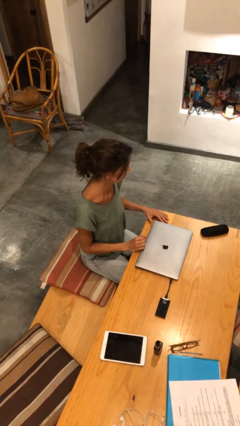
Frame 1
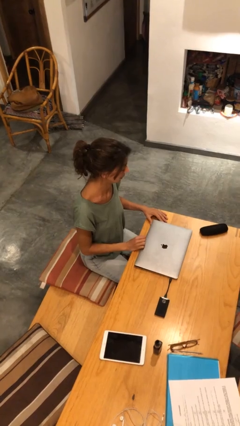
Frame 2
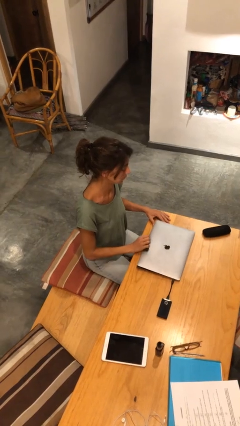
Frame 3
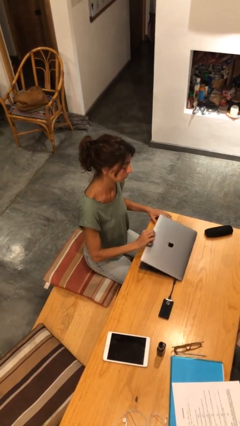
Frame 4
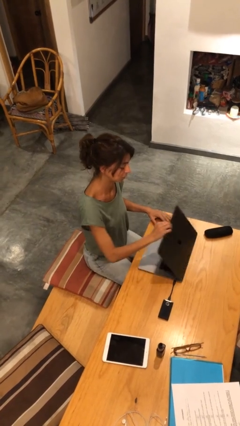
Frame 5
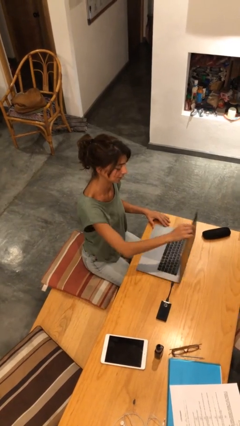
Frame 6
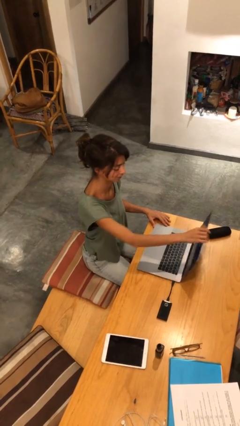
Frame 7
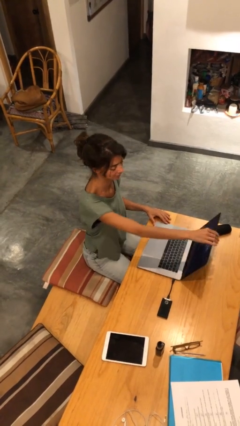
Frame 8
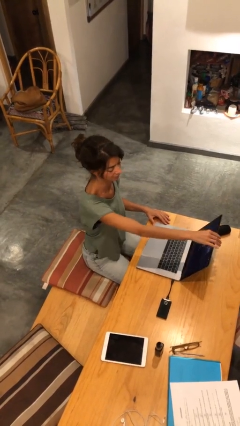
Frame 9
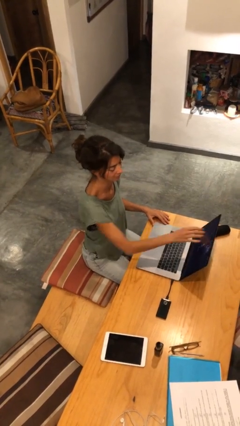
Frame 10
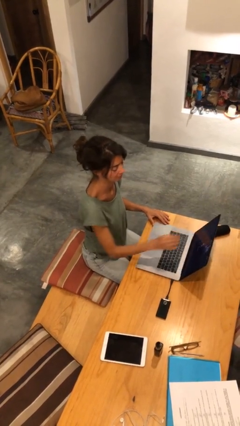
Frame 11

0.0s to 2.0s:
person opens laptop

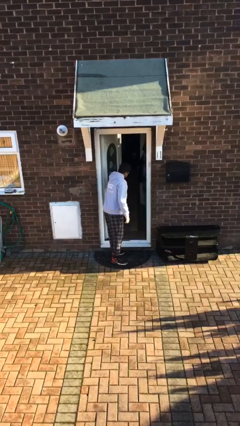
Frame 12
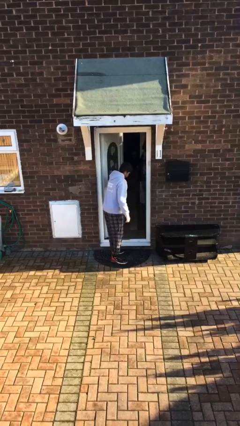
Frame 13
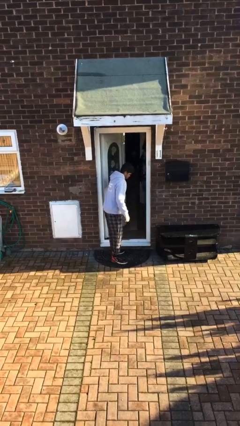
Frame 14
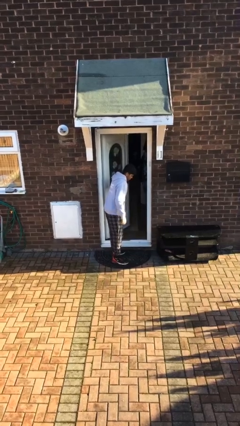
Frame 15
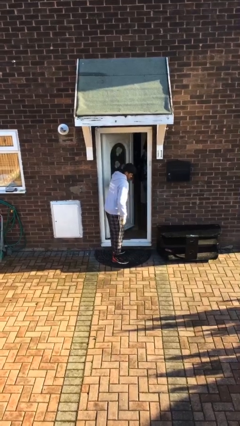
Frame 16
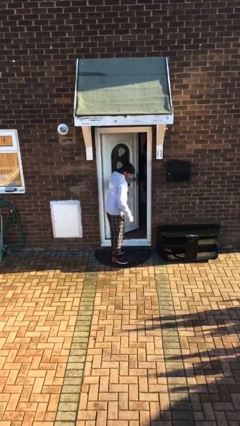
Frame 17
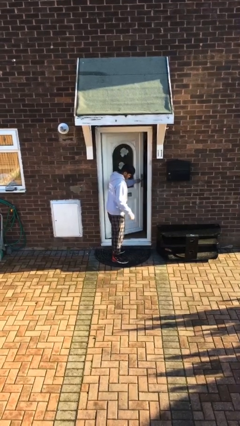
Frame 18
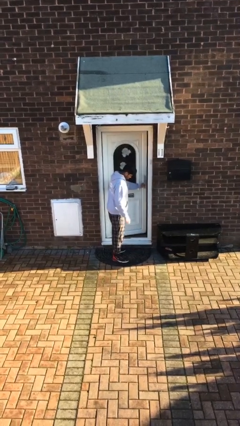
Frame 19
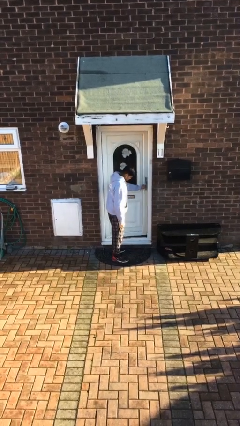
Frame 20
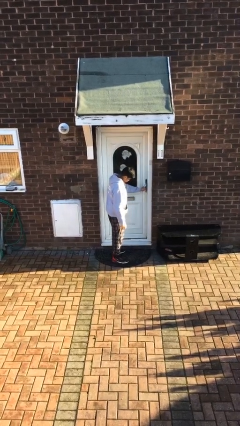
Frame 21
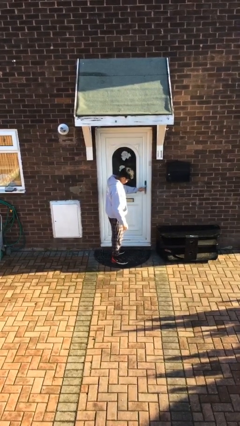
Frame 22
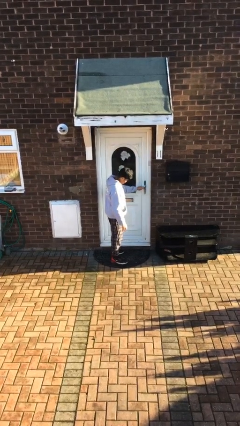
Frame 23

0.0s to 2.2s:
person closes facility door

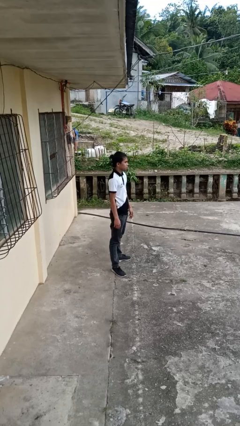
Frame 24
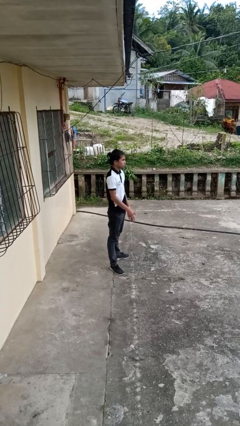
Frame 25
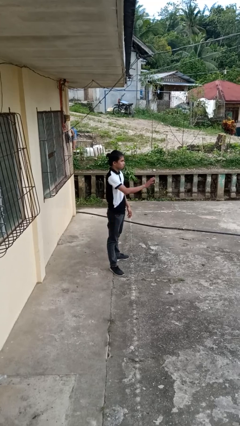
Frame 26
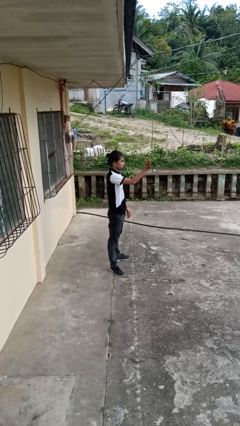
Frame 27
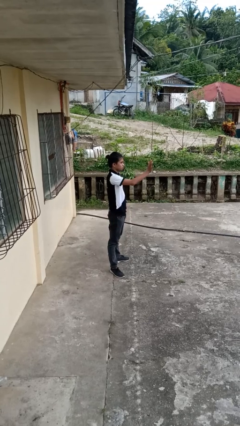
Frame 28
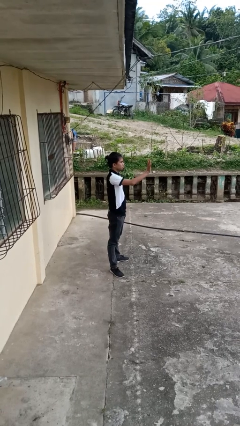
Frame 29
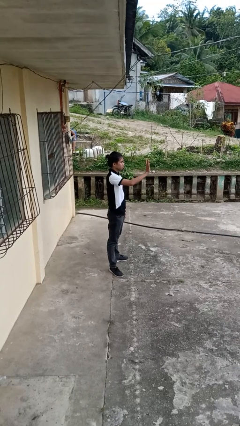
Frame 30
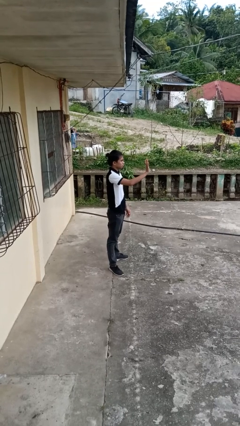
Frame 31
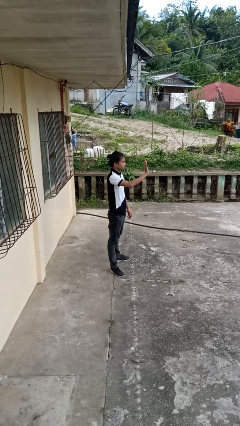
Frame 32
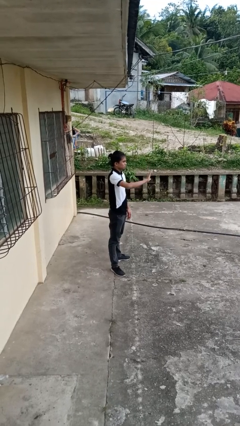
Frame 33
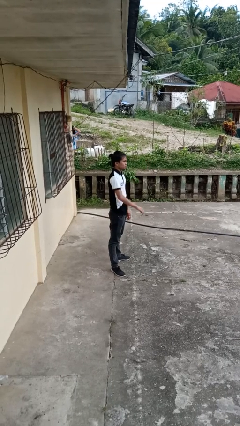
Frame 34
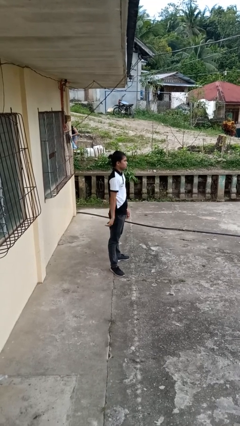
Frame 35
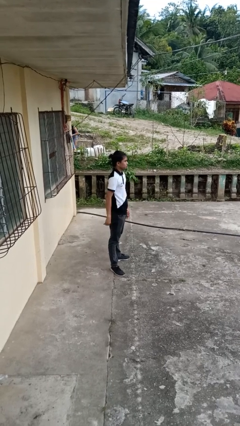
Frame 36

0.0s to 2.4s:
person waves at person

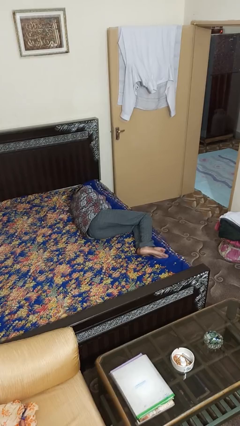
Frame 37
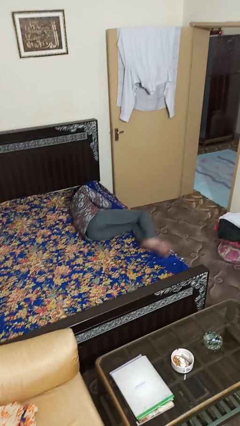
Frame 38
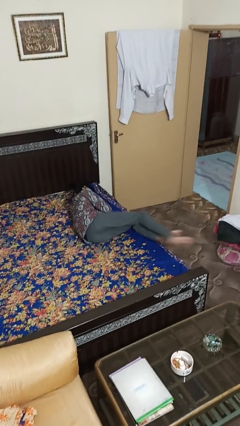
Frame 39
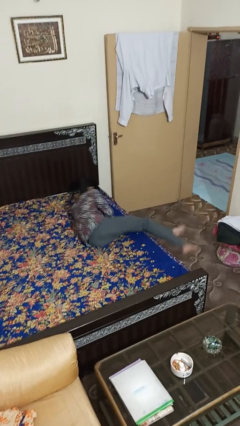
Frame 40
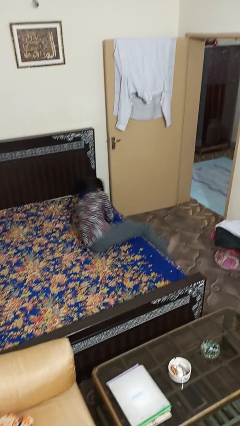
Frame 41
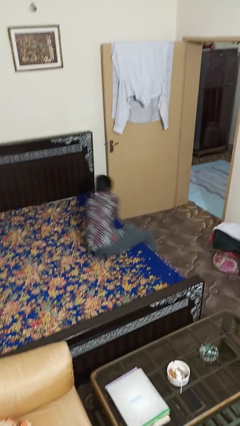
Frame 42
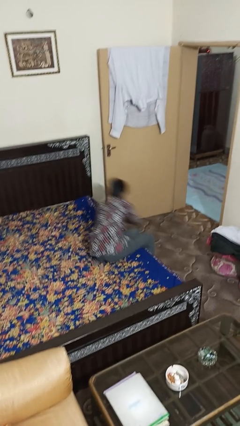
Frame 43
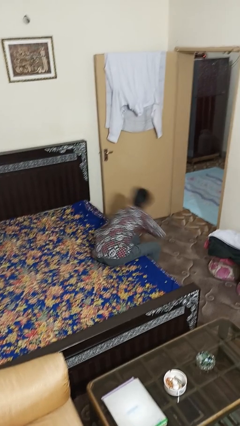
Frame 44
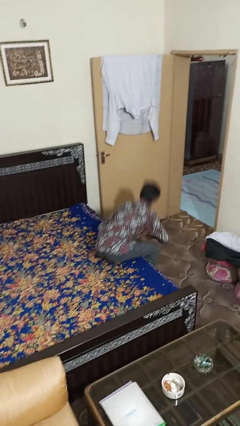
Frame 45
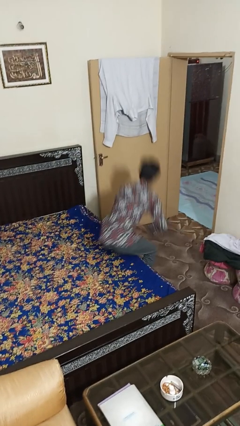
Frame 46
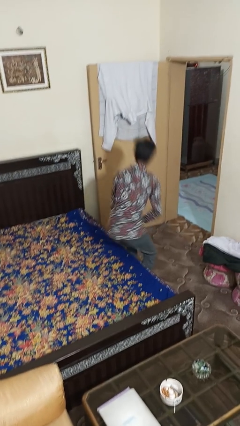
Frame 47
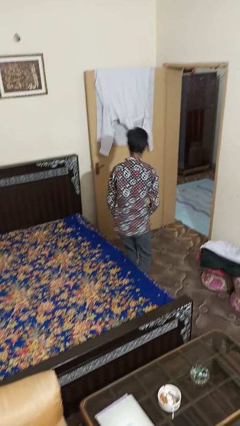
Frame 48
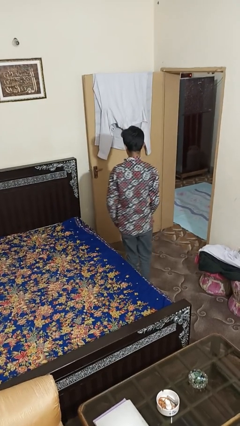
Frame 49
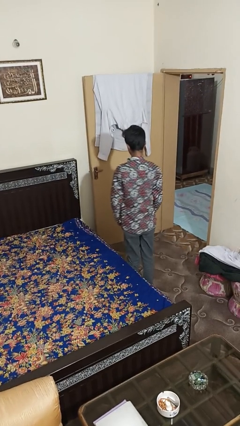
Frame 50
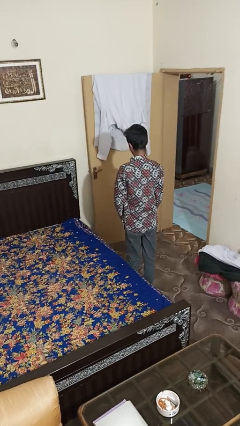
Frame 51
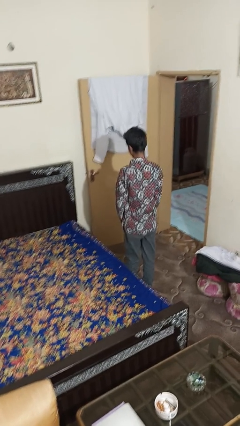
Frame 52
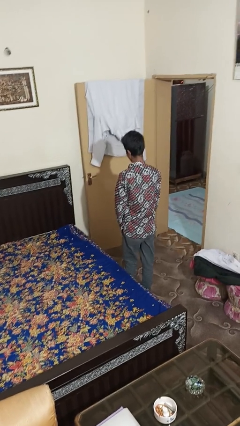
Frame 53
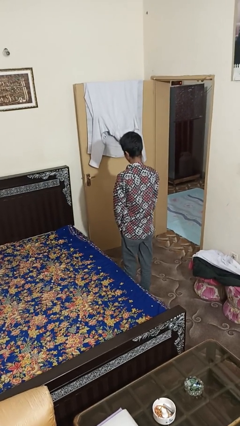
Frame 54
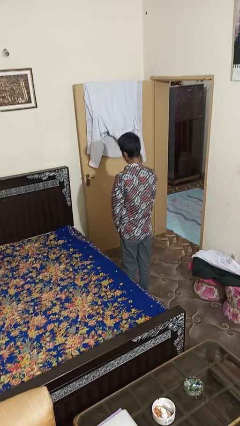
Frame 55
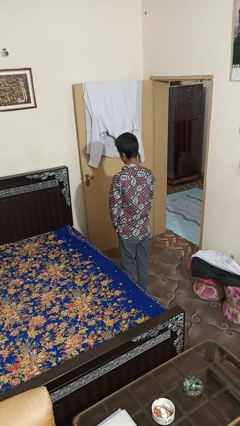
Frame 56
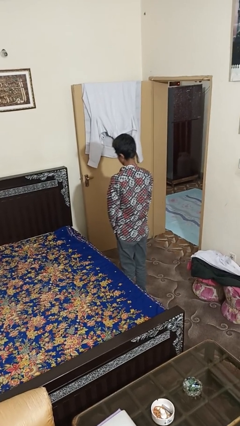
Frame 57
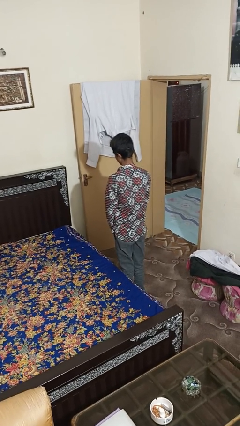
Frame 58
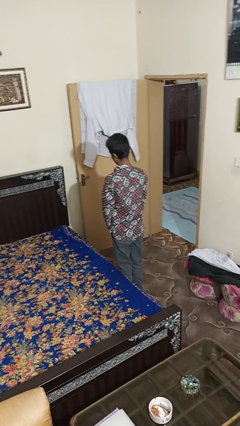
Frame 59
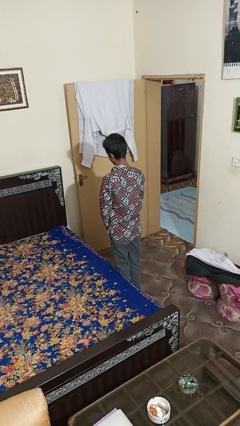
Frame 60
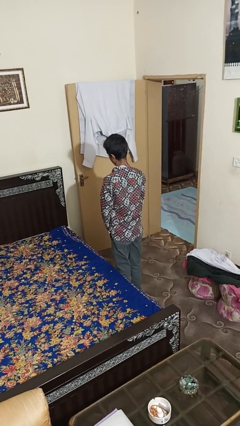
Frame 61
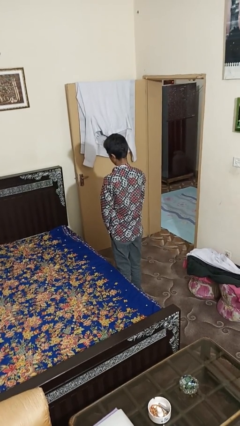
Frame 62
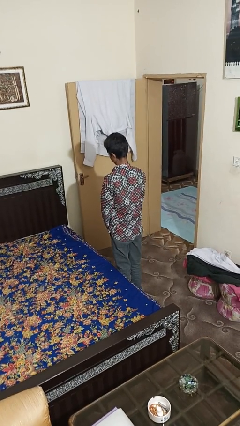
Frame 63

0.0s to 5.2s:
person stands up

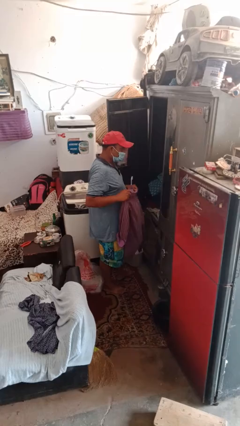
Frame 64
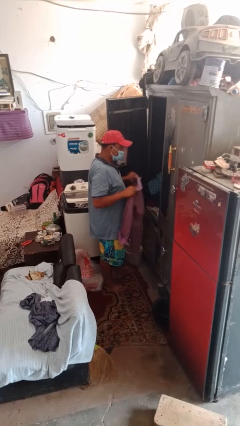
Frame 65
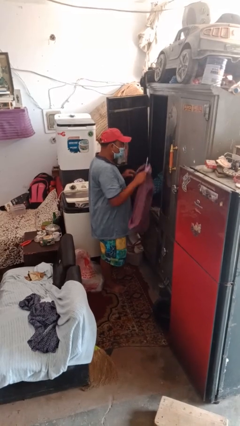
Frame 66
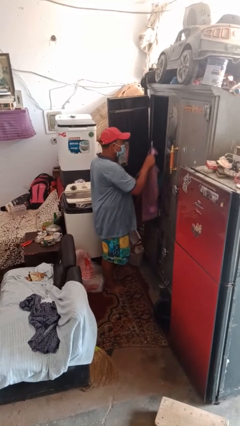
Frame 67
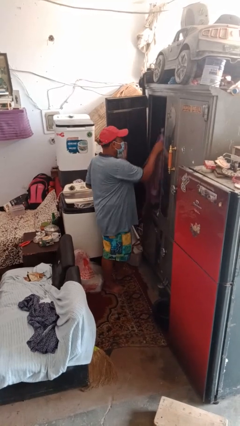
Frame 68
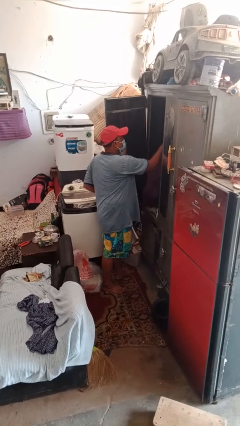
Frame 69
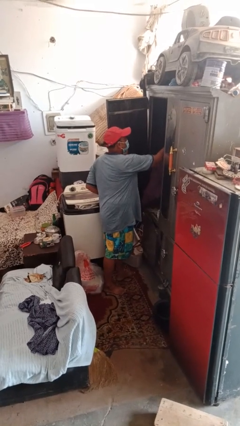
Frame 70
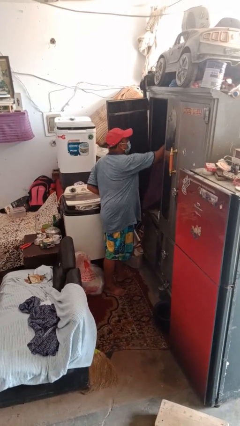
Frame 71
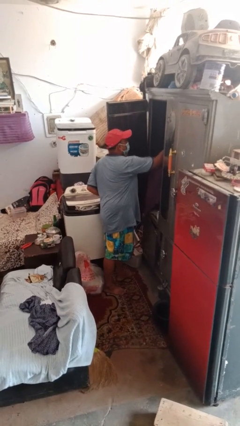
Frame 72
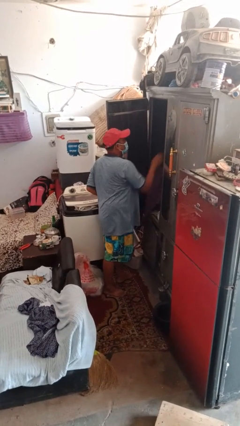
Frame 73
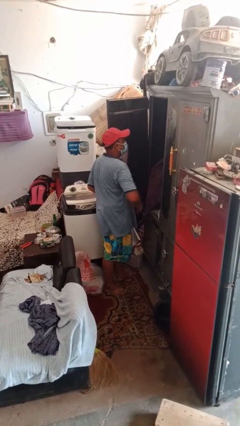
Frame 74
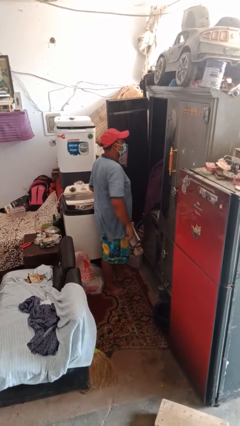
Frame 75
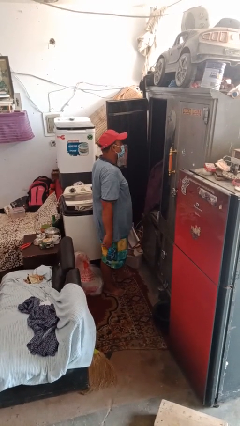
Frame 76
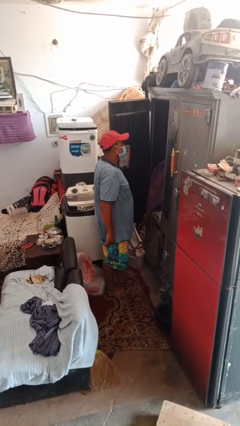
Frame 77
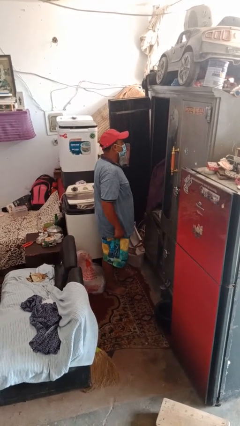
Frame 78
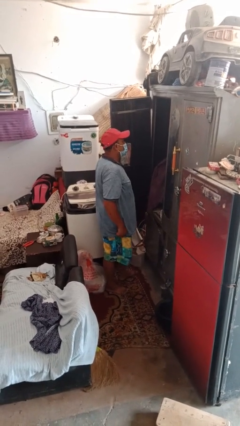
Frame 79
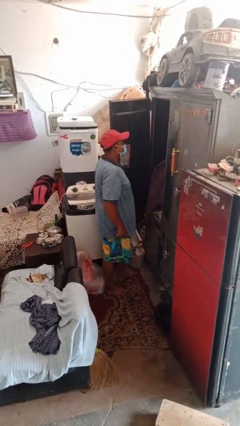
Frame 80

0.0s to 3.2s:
person puts clothes into closet

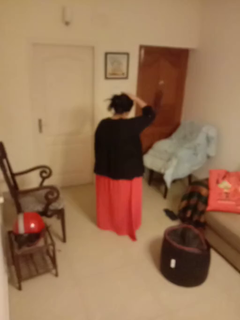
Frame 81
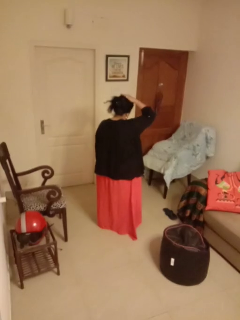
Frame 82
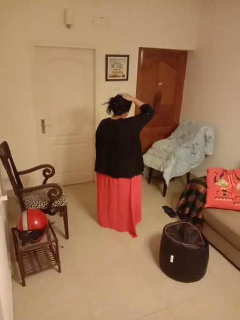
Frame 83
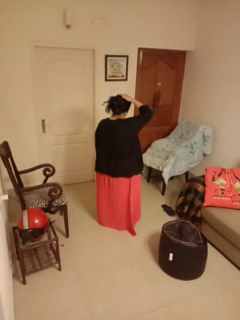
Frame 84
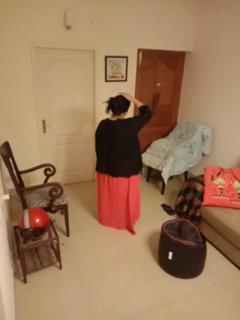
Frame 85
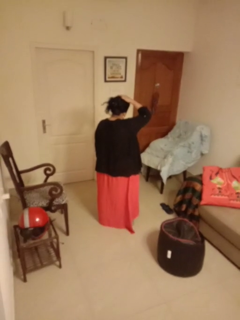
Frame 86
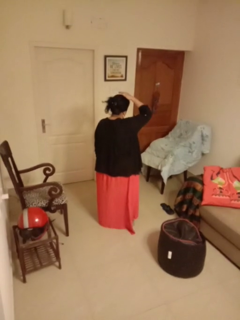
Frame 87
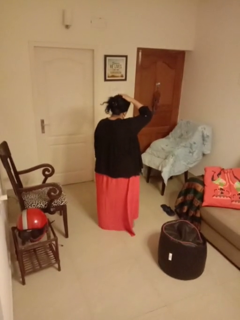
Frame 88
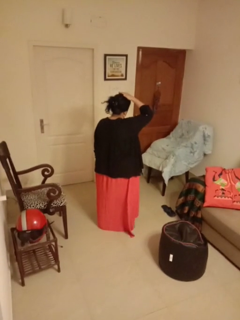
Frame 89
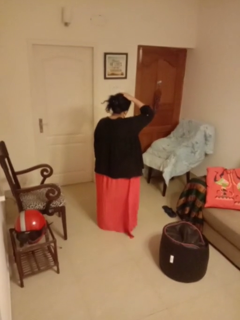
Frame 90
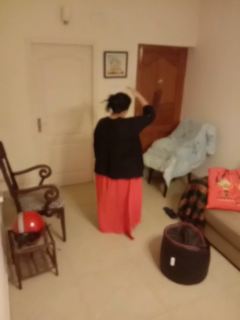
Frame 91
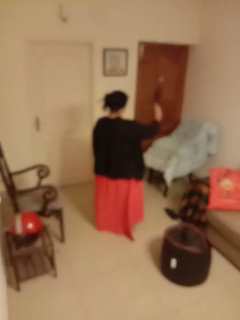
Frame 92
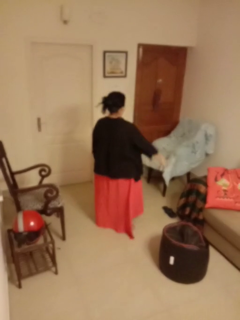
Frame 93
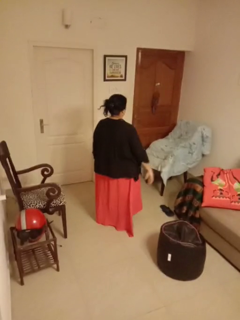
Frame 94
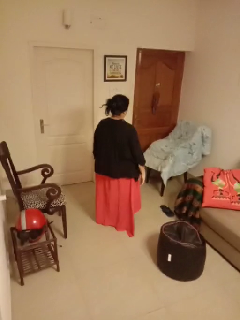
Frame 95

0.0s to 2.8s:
person pats head

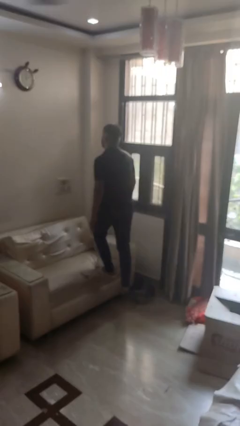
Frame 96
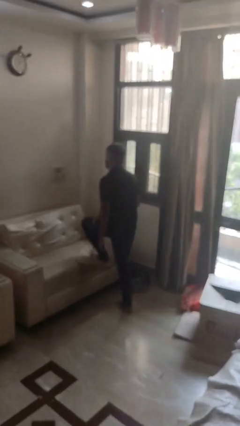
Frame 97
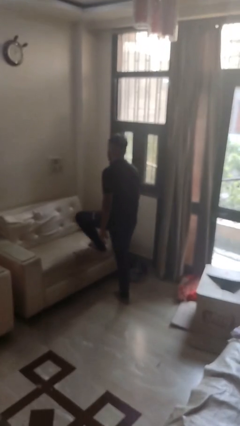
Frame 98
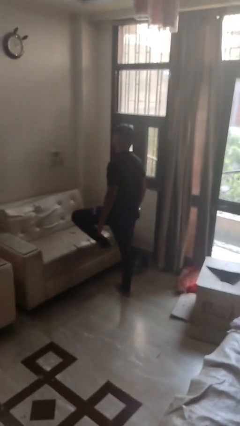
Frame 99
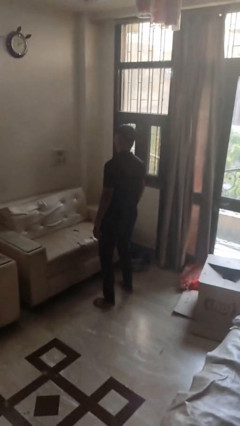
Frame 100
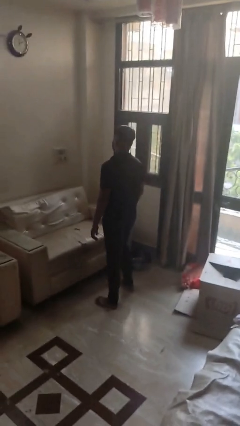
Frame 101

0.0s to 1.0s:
person climbs off couch
